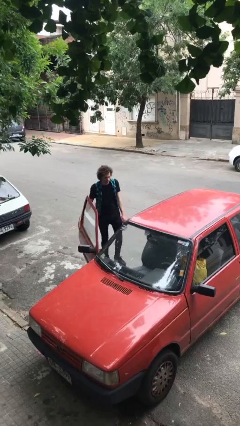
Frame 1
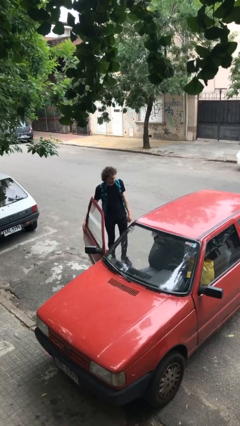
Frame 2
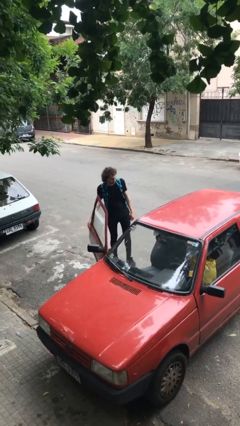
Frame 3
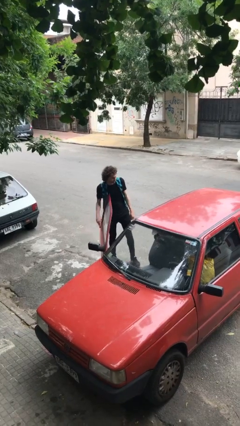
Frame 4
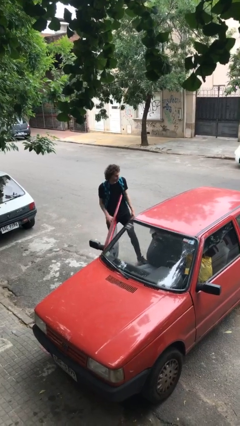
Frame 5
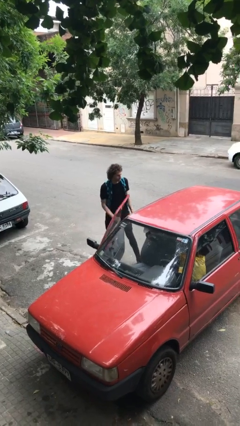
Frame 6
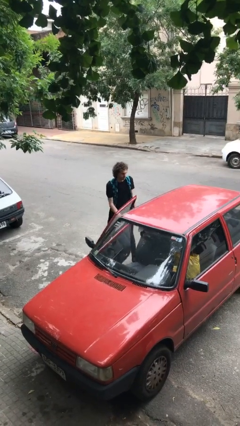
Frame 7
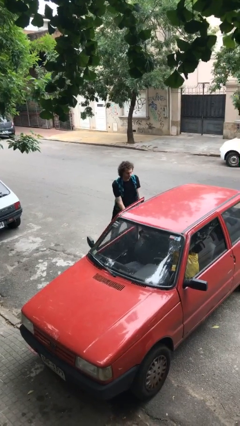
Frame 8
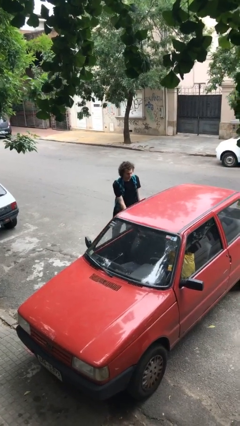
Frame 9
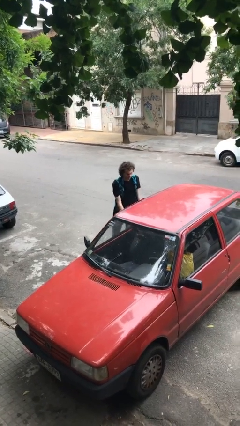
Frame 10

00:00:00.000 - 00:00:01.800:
person closes car trunk

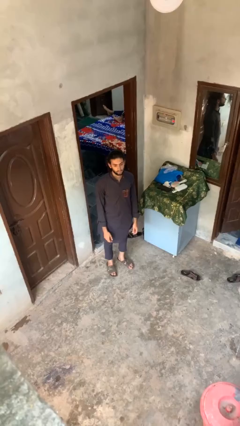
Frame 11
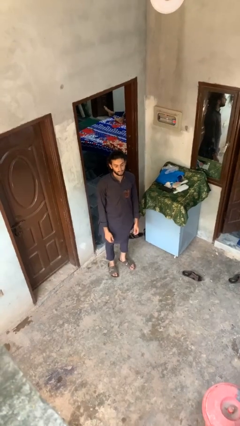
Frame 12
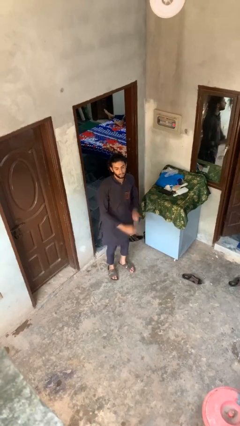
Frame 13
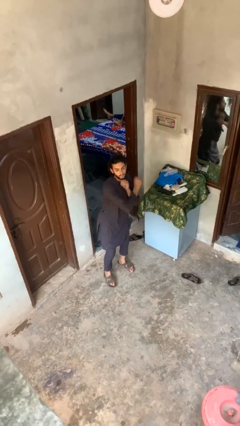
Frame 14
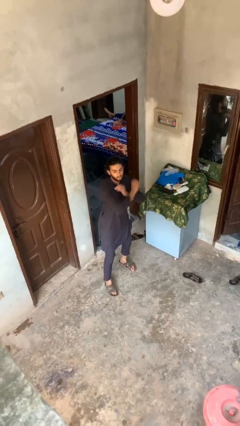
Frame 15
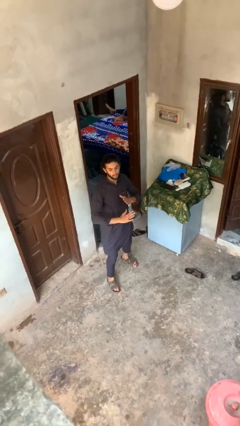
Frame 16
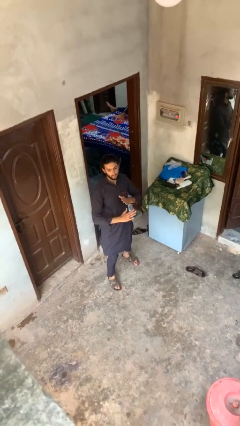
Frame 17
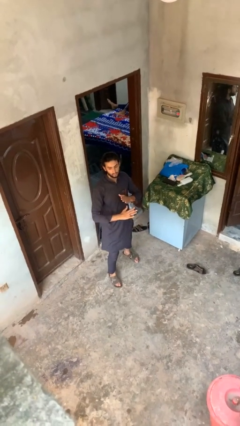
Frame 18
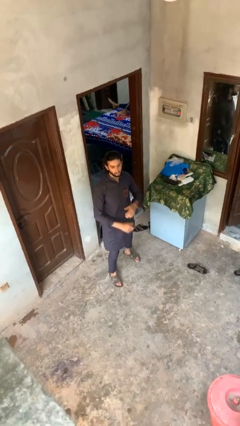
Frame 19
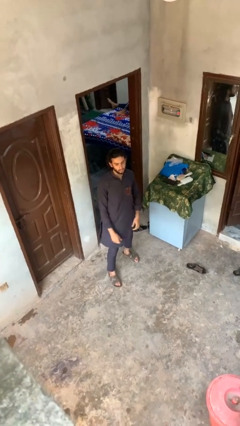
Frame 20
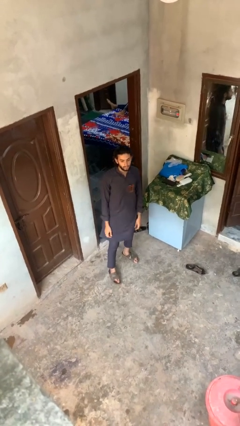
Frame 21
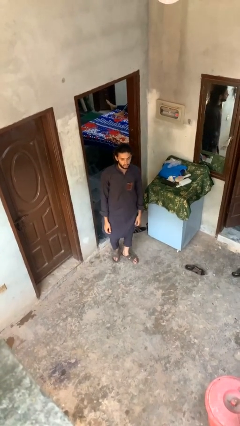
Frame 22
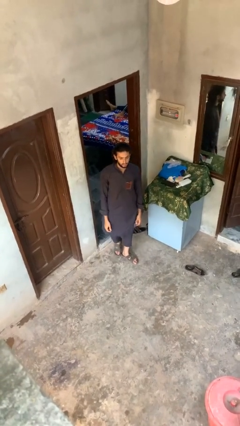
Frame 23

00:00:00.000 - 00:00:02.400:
person karate chop

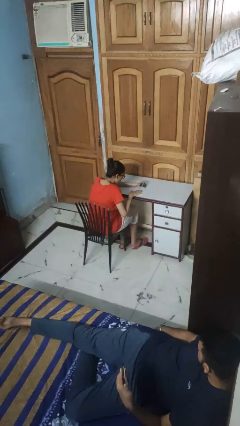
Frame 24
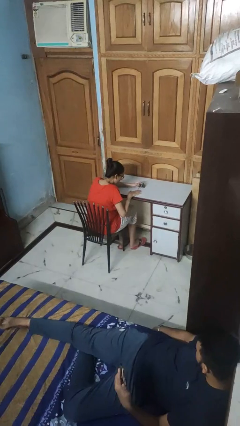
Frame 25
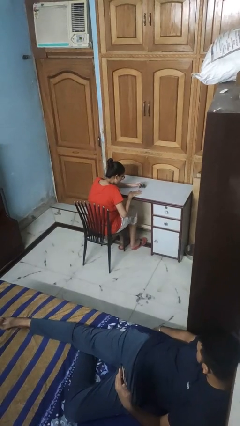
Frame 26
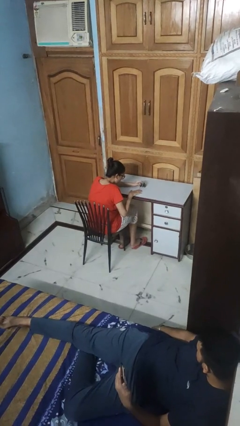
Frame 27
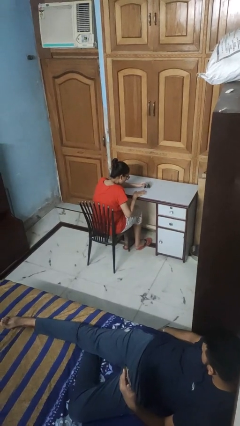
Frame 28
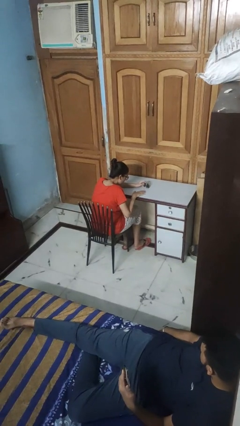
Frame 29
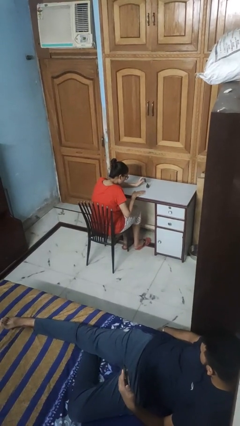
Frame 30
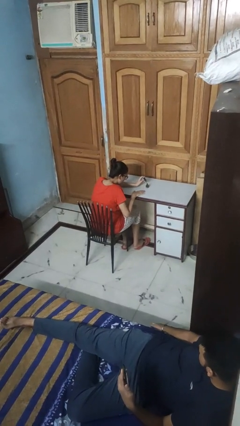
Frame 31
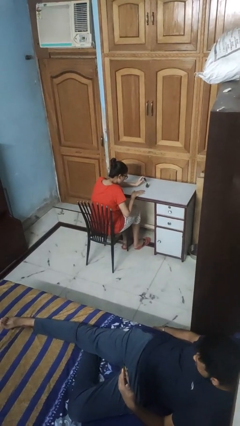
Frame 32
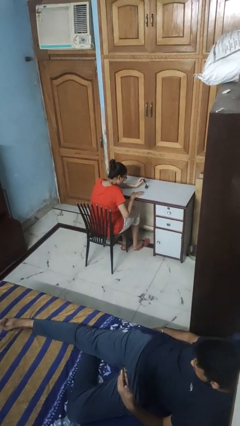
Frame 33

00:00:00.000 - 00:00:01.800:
person paints fingernails

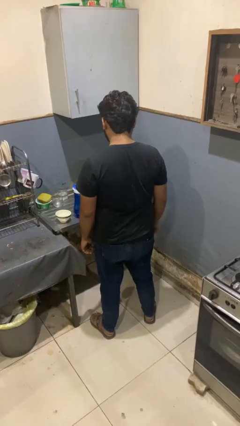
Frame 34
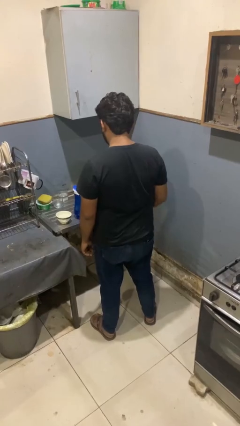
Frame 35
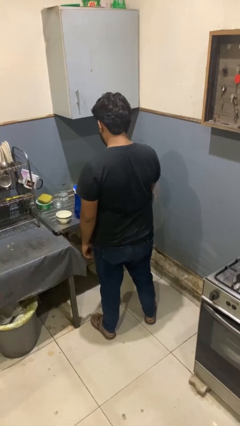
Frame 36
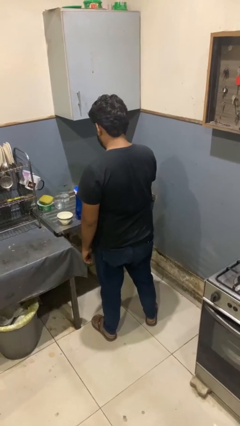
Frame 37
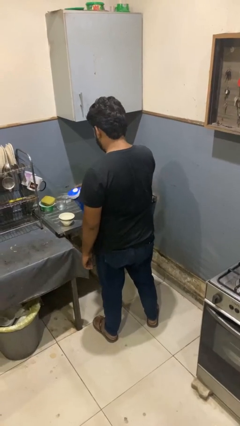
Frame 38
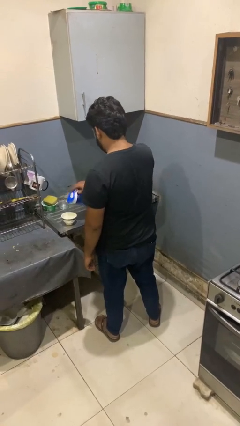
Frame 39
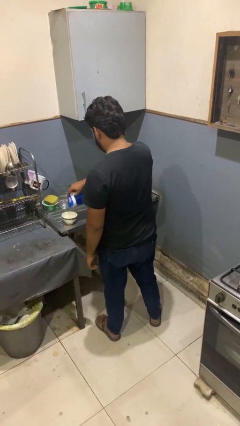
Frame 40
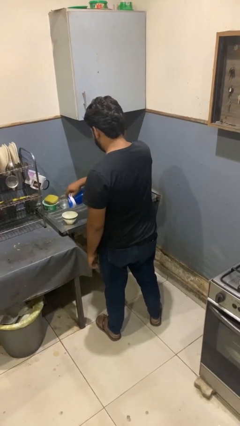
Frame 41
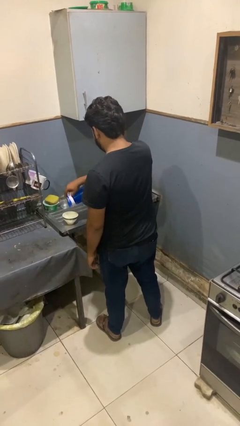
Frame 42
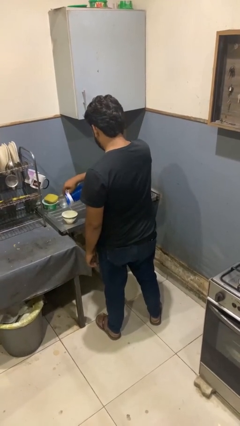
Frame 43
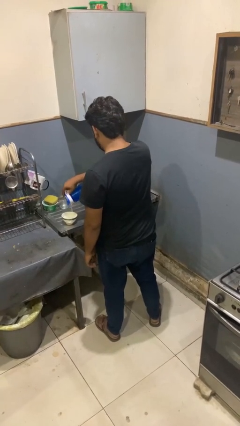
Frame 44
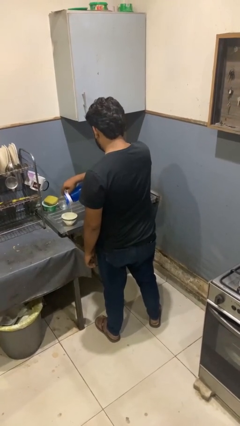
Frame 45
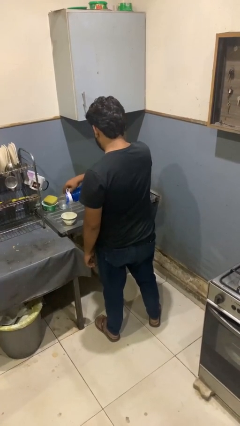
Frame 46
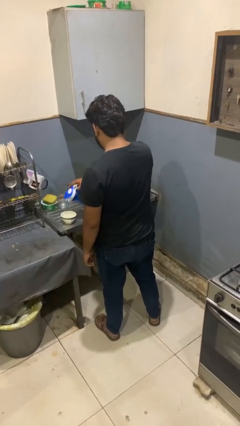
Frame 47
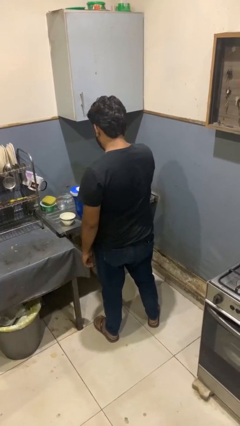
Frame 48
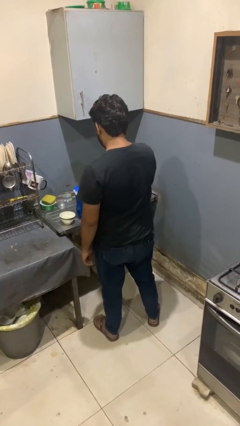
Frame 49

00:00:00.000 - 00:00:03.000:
person pours into bowl

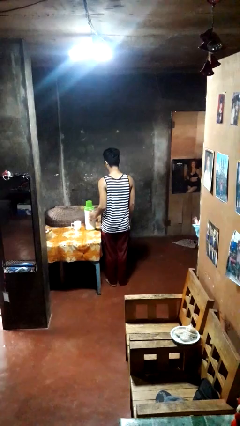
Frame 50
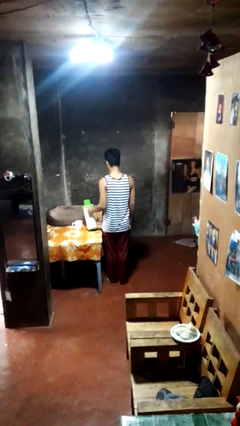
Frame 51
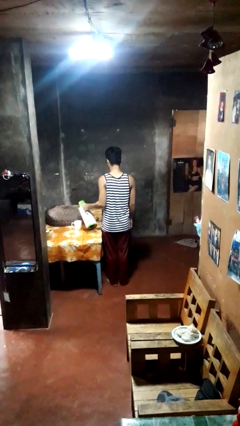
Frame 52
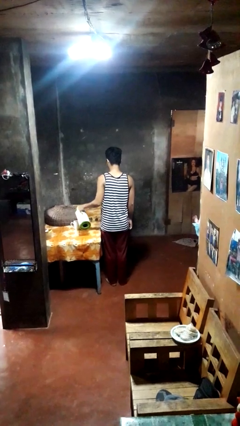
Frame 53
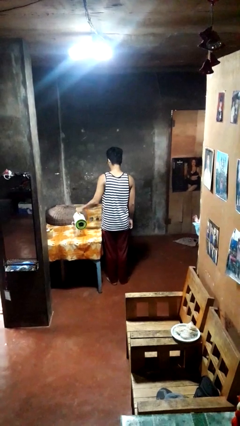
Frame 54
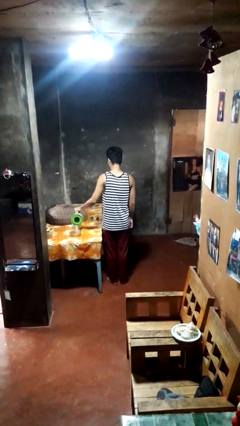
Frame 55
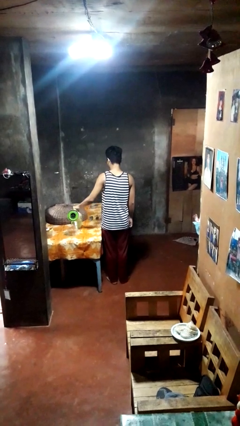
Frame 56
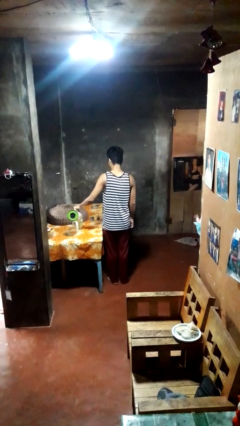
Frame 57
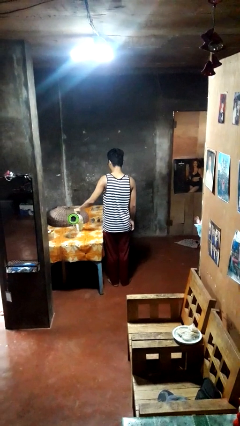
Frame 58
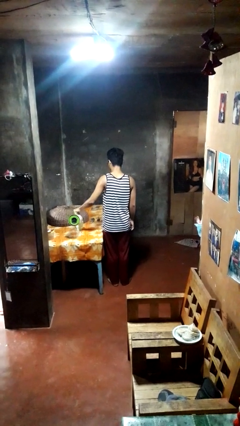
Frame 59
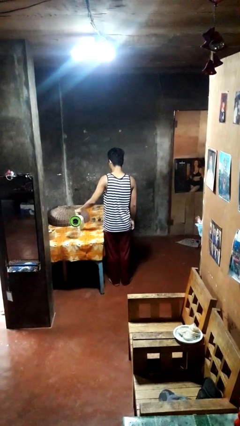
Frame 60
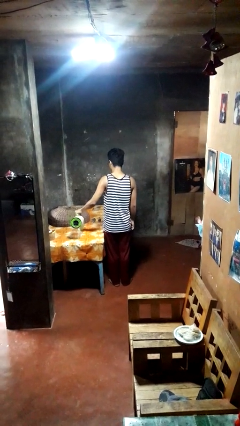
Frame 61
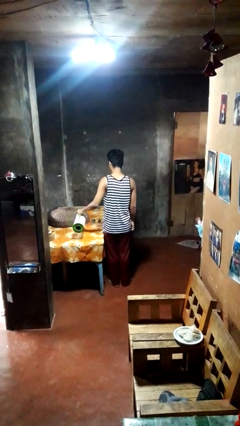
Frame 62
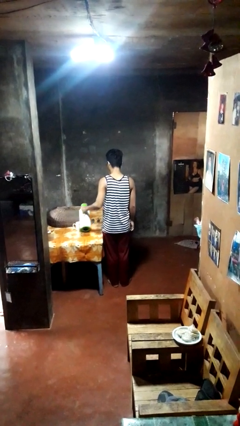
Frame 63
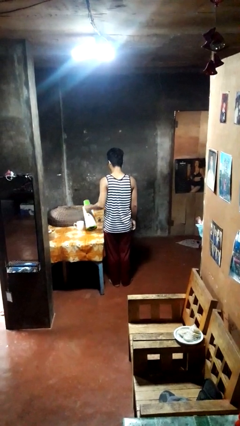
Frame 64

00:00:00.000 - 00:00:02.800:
person pours coffee into mug

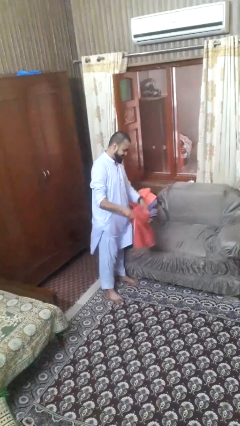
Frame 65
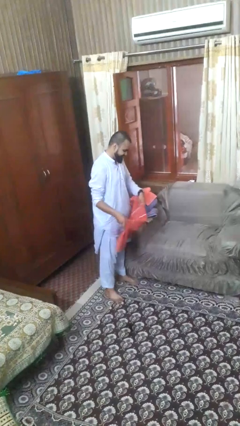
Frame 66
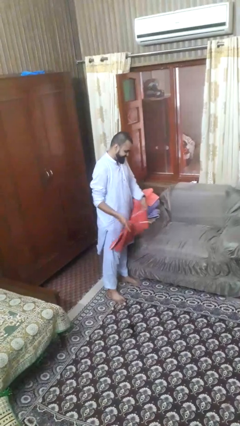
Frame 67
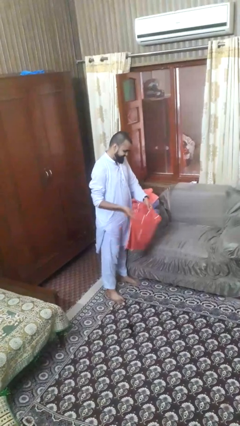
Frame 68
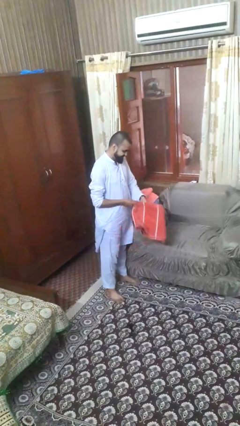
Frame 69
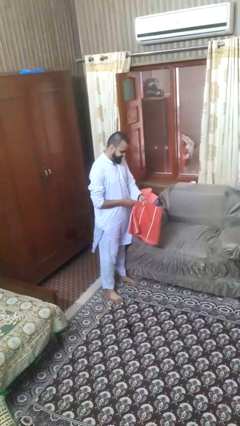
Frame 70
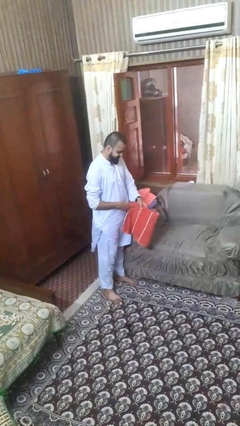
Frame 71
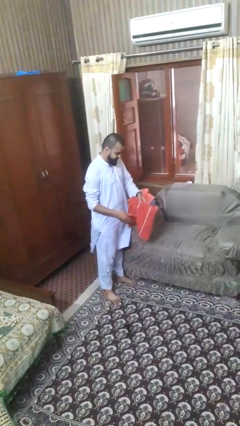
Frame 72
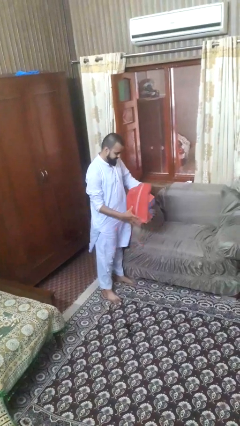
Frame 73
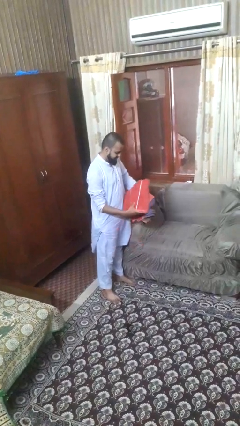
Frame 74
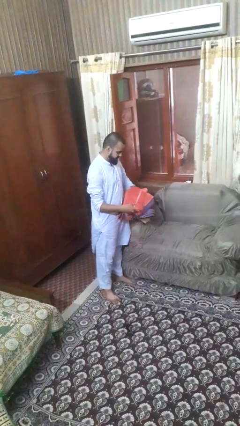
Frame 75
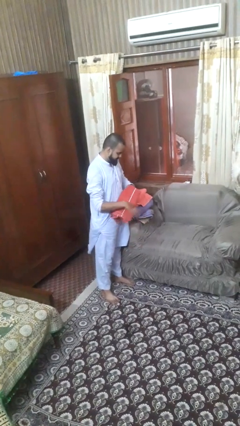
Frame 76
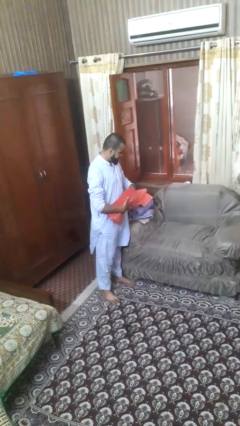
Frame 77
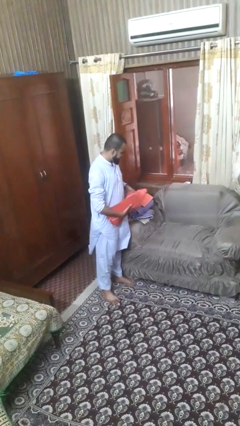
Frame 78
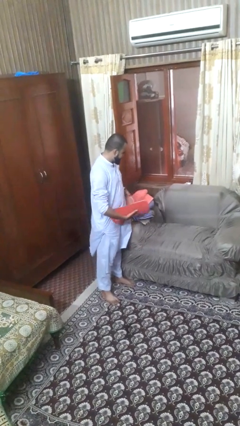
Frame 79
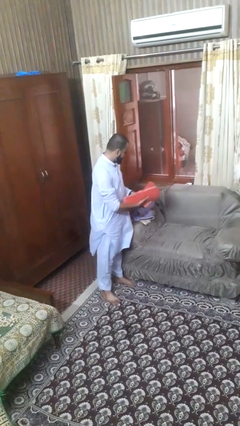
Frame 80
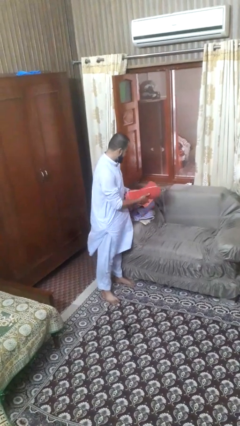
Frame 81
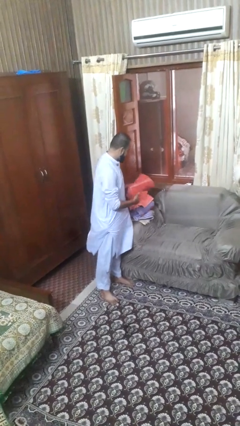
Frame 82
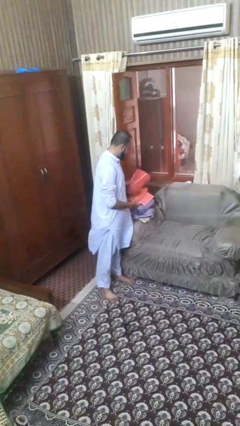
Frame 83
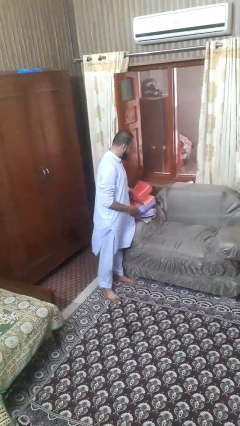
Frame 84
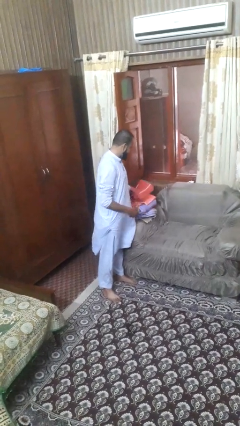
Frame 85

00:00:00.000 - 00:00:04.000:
person folds towel

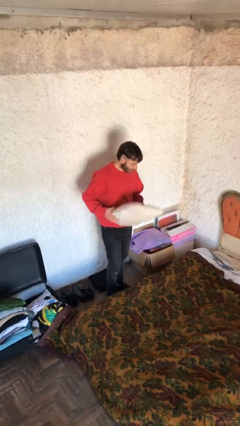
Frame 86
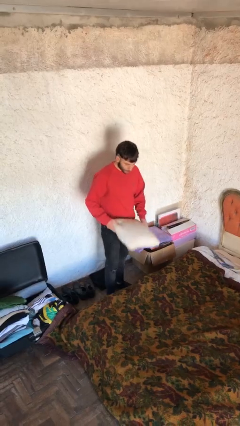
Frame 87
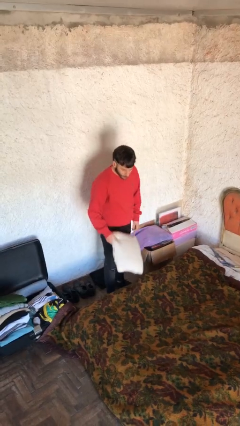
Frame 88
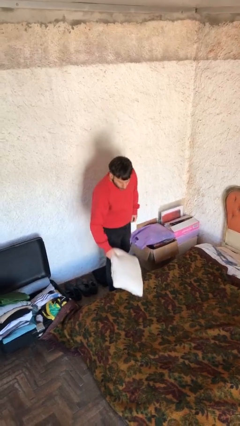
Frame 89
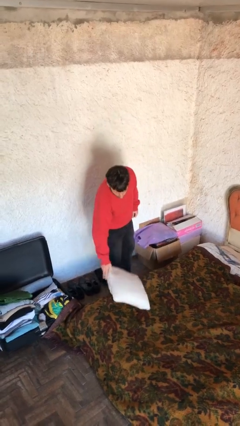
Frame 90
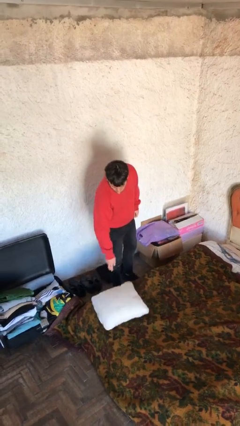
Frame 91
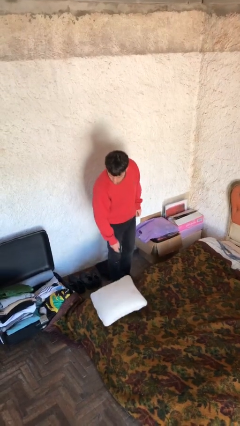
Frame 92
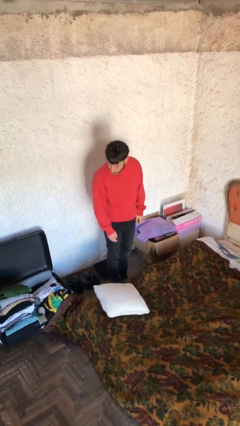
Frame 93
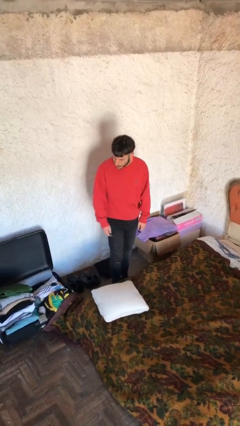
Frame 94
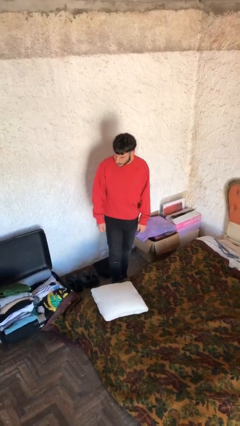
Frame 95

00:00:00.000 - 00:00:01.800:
person puts down object on bed
